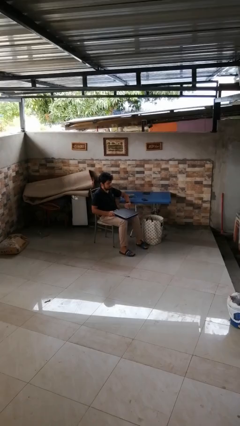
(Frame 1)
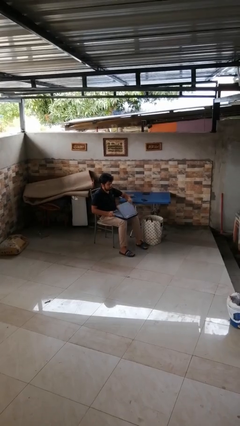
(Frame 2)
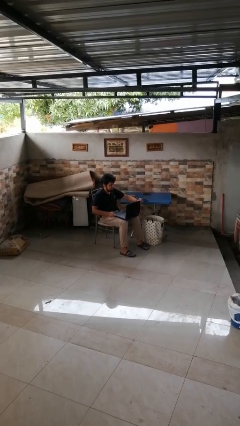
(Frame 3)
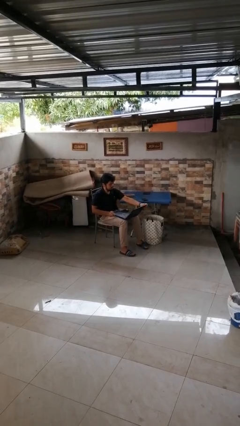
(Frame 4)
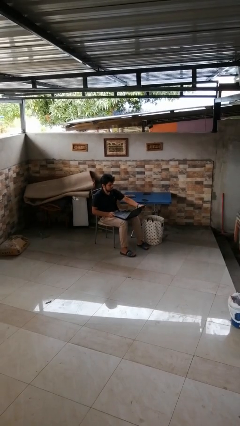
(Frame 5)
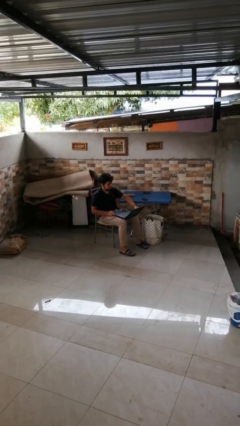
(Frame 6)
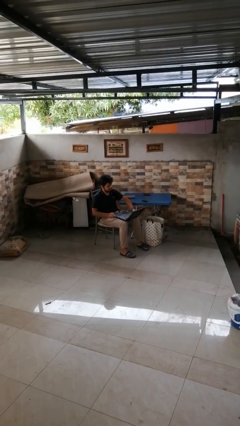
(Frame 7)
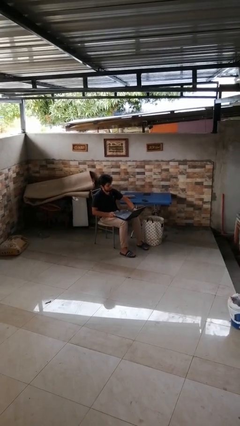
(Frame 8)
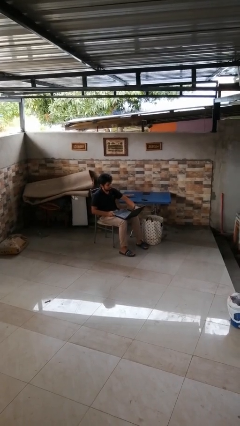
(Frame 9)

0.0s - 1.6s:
person opens laptop

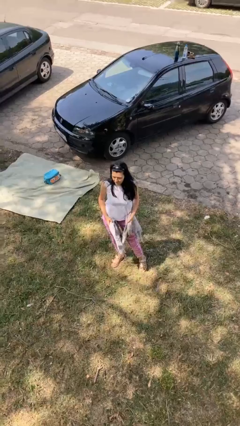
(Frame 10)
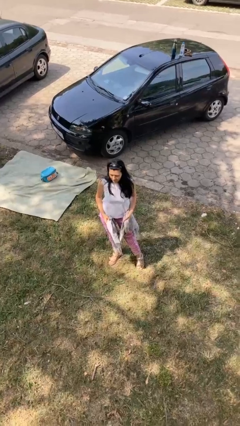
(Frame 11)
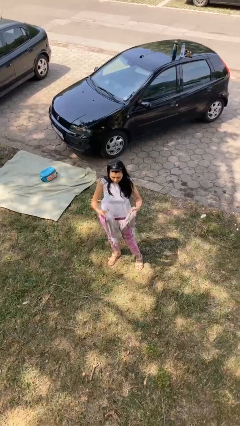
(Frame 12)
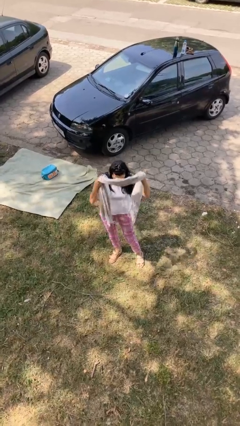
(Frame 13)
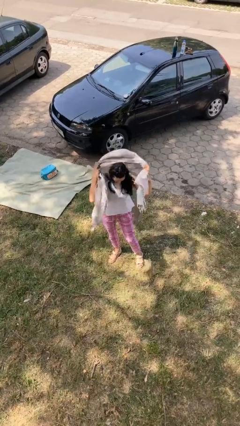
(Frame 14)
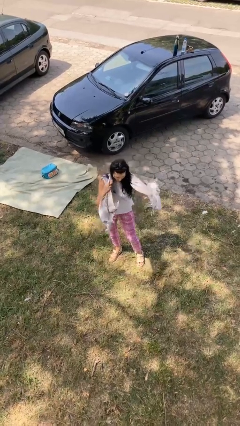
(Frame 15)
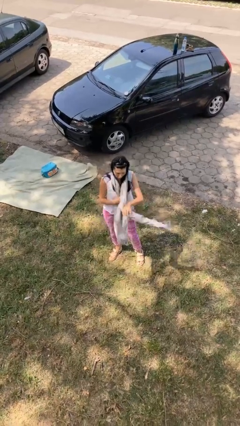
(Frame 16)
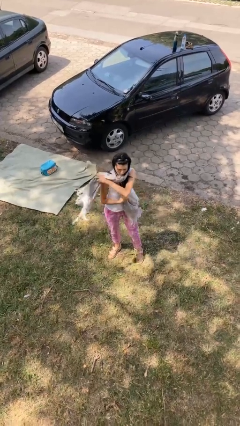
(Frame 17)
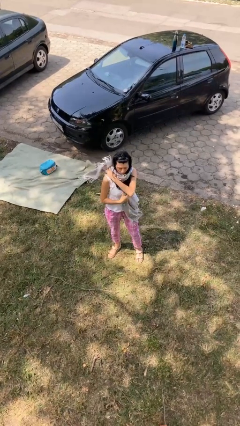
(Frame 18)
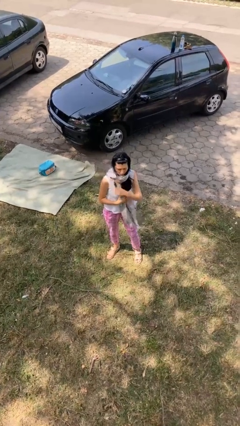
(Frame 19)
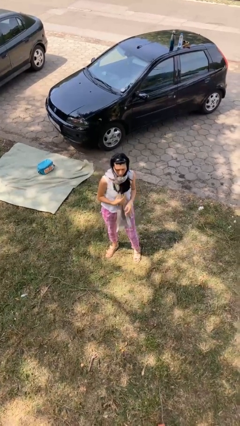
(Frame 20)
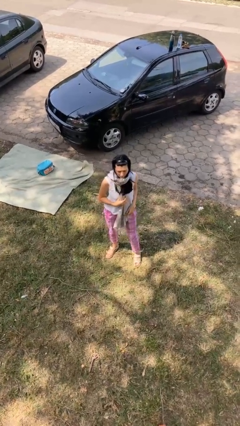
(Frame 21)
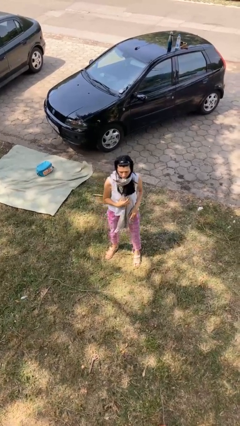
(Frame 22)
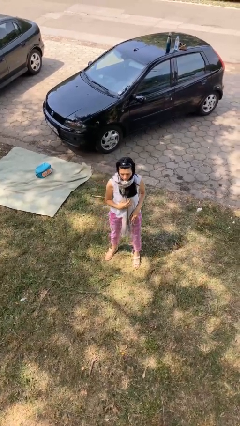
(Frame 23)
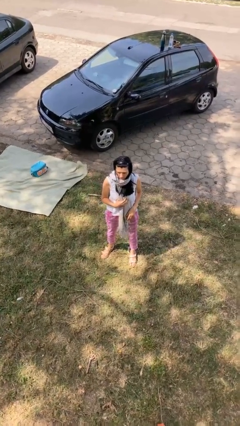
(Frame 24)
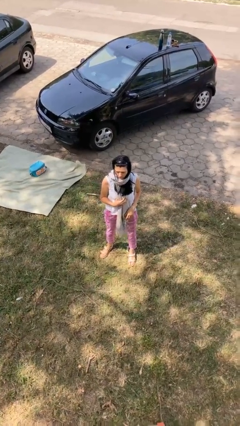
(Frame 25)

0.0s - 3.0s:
person puts on scarf

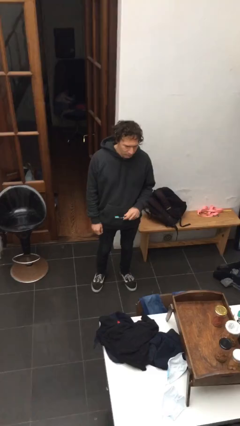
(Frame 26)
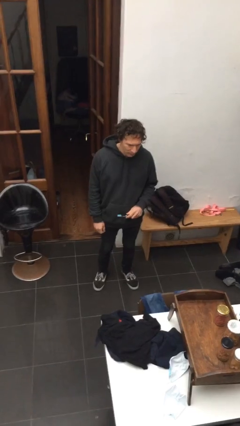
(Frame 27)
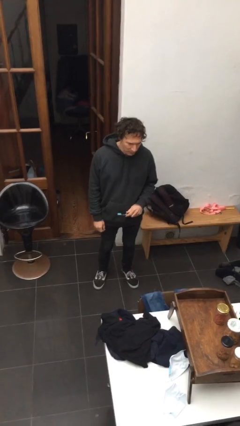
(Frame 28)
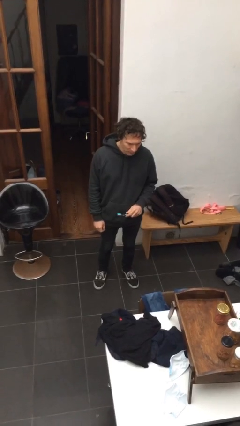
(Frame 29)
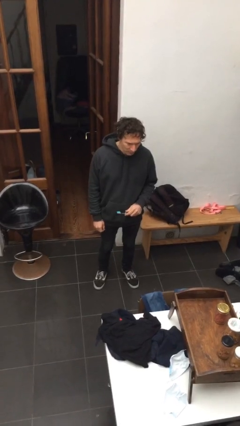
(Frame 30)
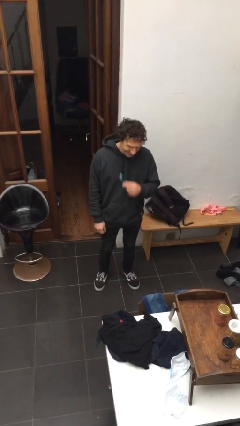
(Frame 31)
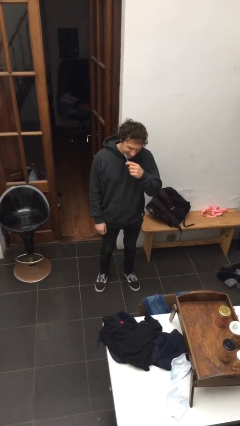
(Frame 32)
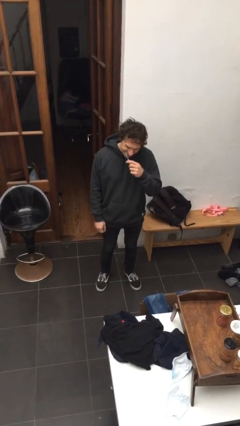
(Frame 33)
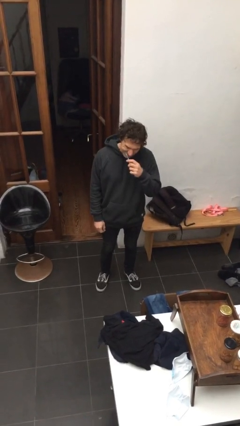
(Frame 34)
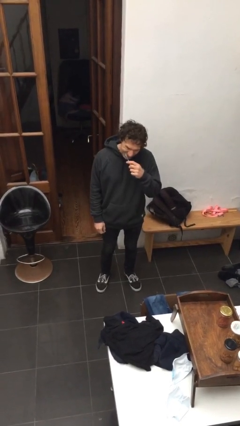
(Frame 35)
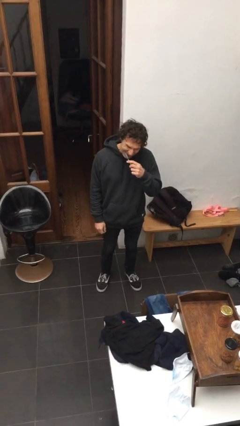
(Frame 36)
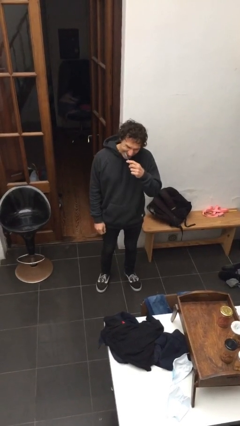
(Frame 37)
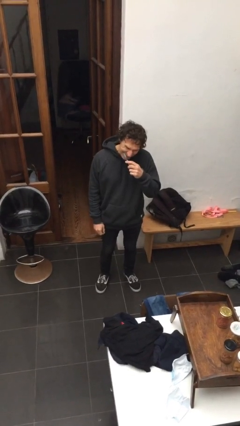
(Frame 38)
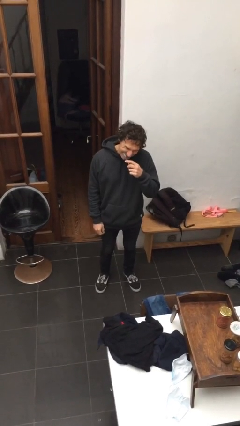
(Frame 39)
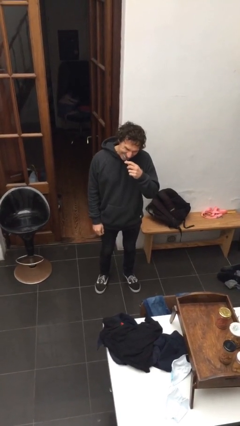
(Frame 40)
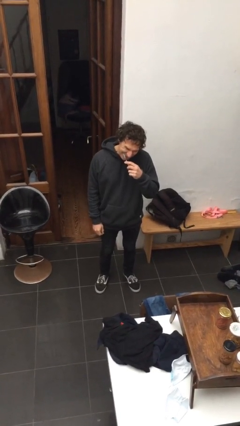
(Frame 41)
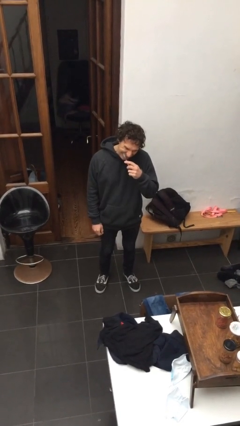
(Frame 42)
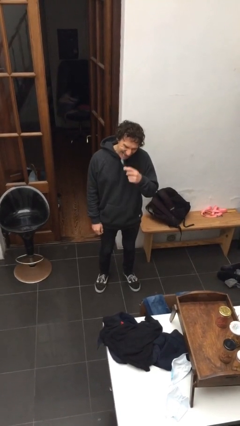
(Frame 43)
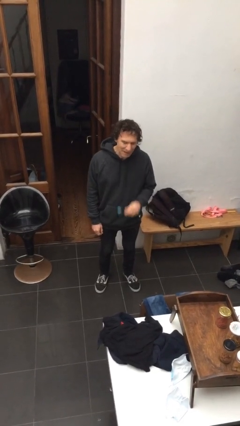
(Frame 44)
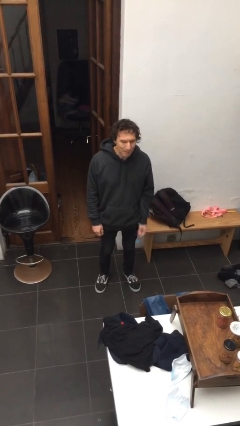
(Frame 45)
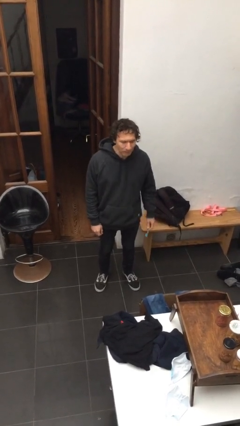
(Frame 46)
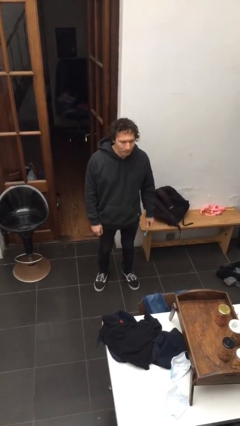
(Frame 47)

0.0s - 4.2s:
person flosses

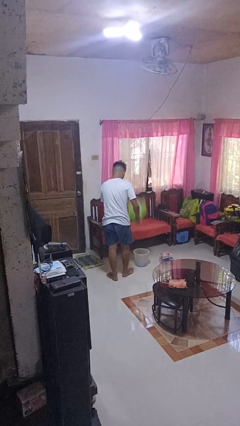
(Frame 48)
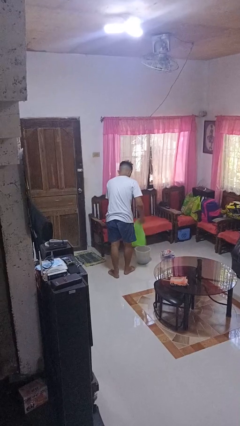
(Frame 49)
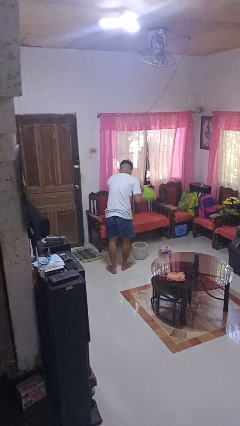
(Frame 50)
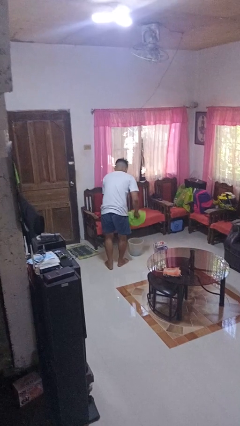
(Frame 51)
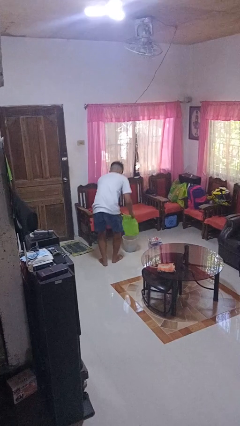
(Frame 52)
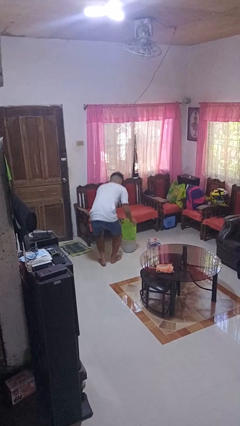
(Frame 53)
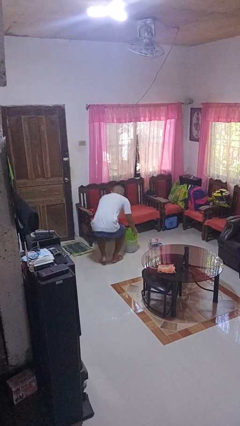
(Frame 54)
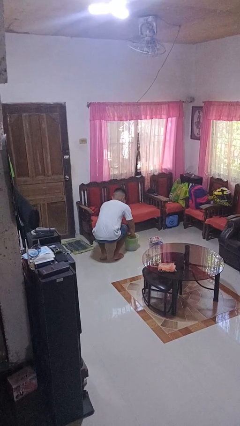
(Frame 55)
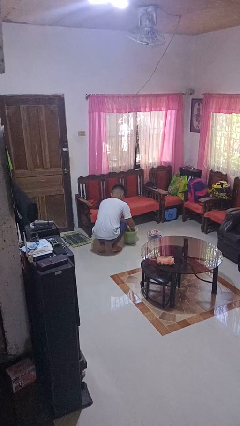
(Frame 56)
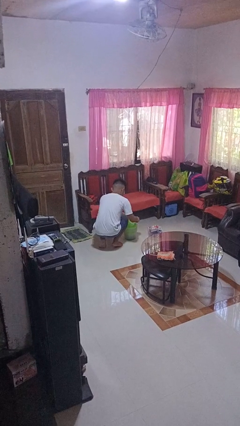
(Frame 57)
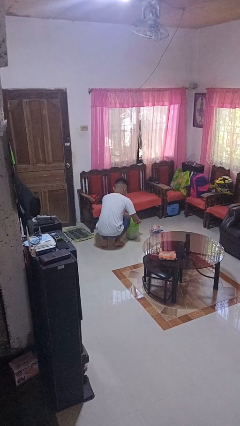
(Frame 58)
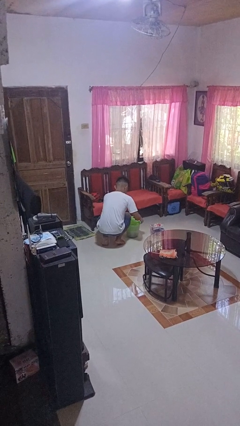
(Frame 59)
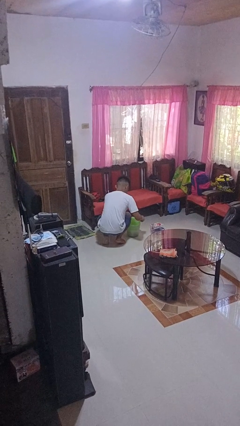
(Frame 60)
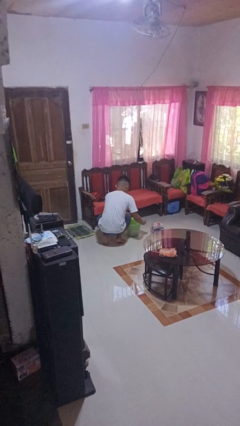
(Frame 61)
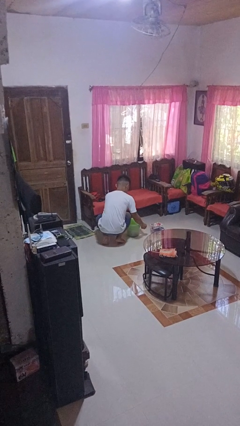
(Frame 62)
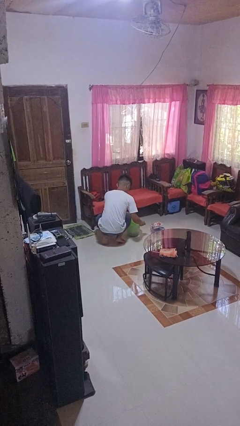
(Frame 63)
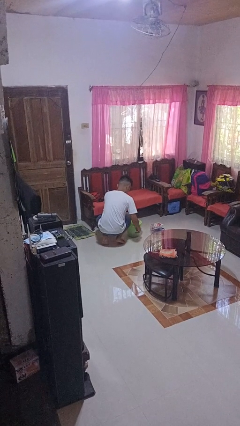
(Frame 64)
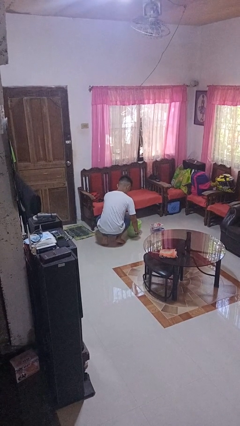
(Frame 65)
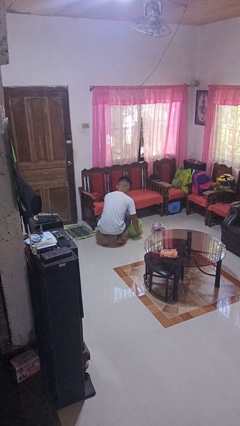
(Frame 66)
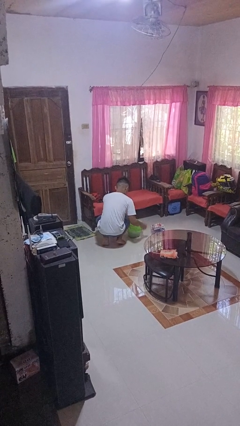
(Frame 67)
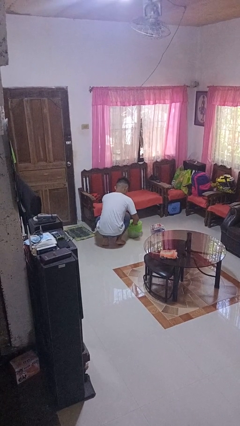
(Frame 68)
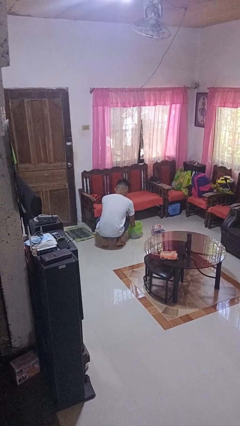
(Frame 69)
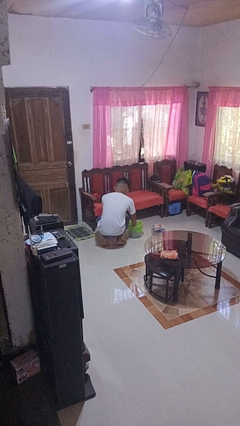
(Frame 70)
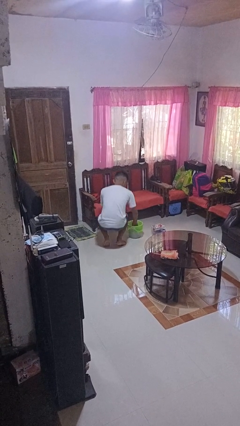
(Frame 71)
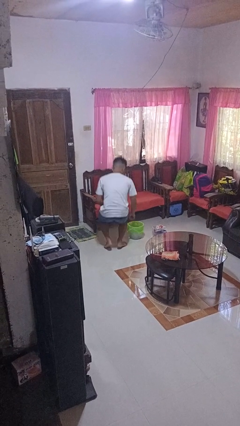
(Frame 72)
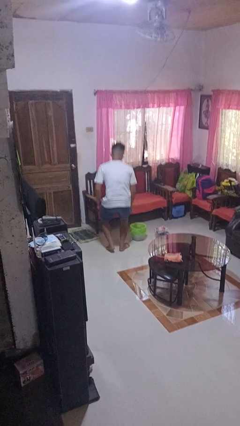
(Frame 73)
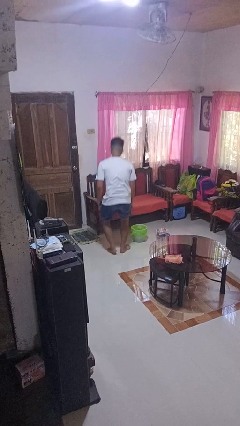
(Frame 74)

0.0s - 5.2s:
person inserts trashbag into trashcan

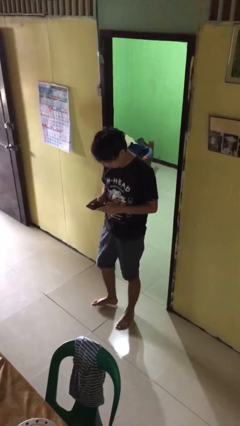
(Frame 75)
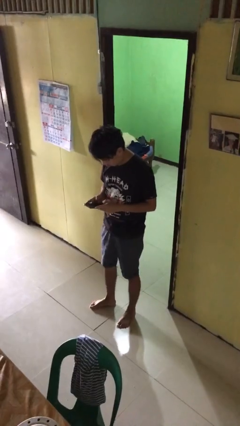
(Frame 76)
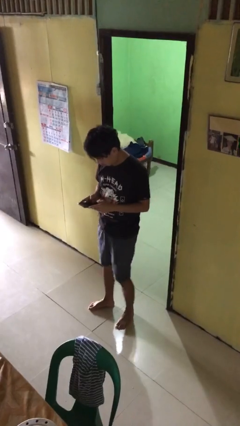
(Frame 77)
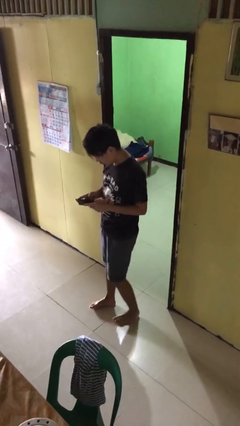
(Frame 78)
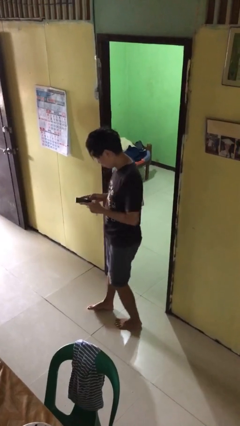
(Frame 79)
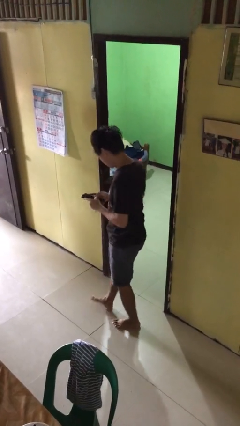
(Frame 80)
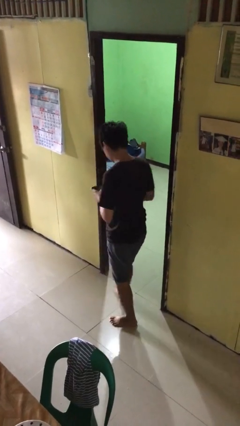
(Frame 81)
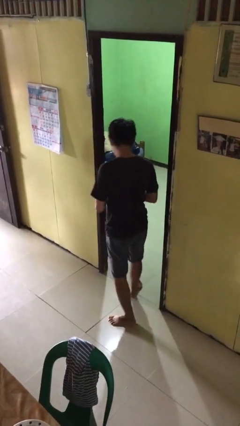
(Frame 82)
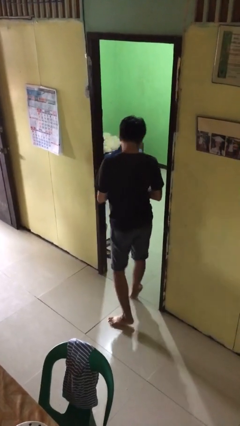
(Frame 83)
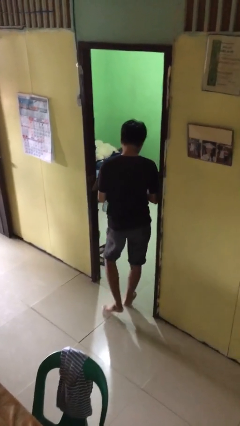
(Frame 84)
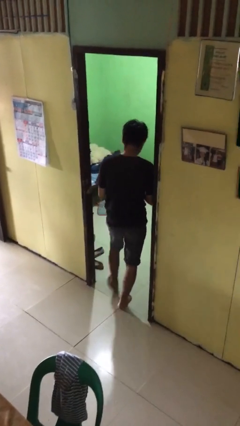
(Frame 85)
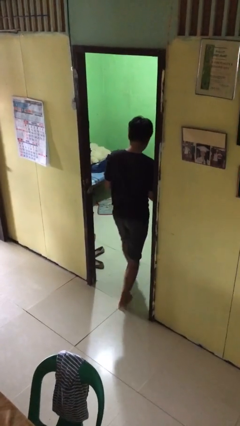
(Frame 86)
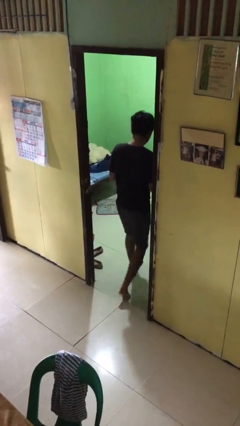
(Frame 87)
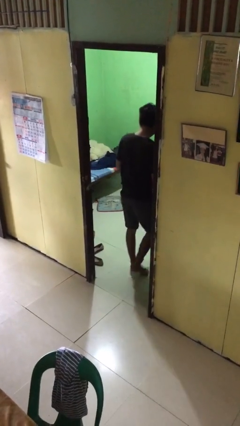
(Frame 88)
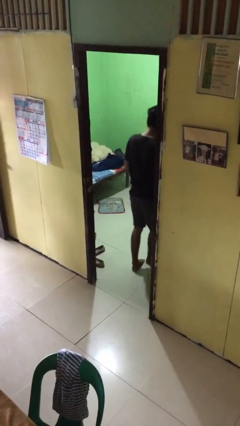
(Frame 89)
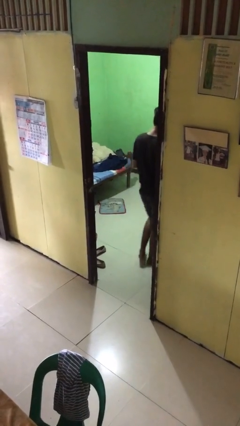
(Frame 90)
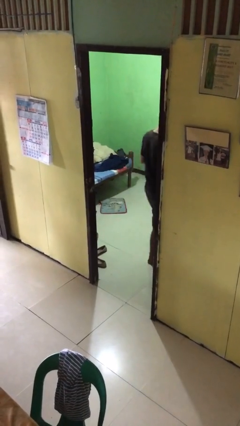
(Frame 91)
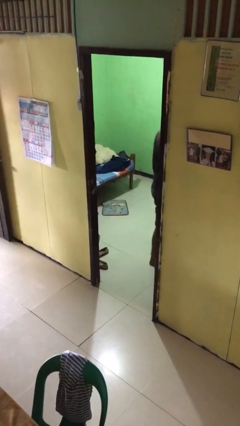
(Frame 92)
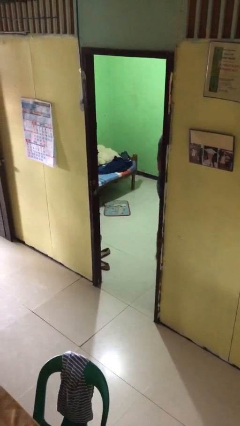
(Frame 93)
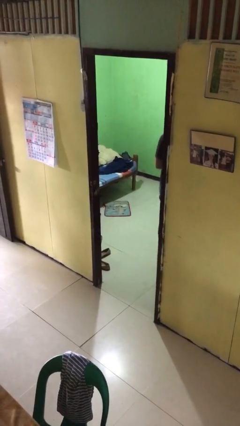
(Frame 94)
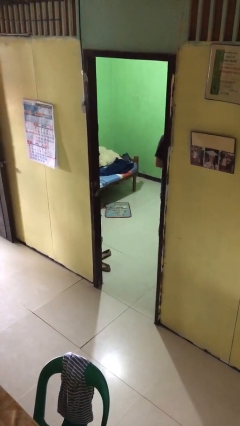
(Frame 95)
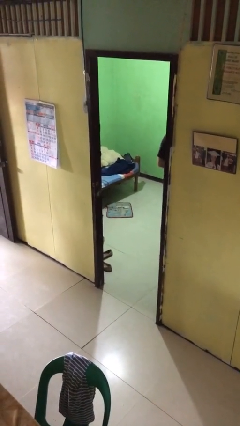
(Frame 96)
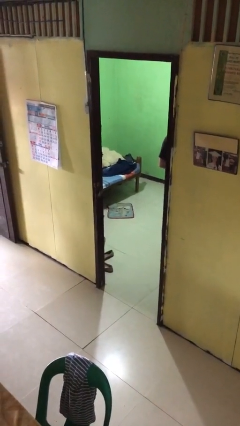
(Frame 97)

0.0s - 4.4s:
person exits scene through structure
